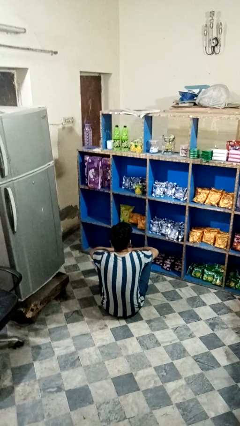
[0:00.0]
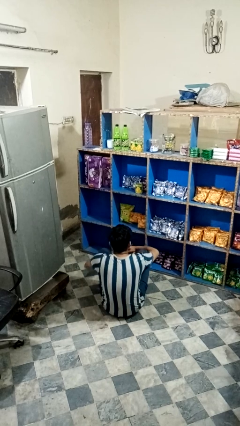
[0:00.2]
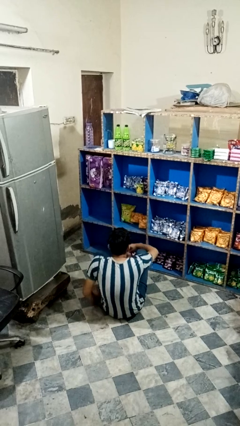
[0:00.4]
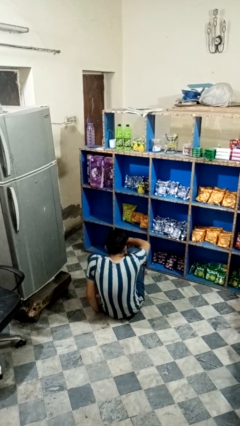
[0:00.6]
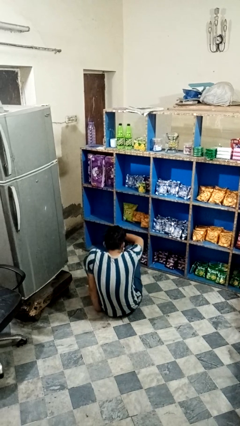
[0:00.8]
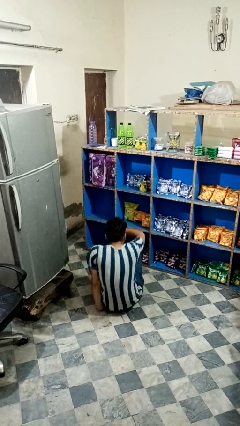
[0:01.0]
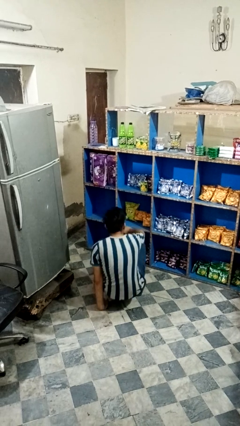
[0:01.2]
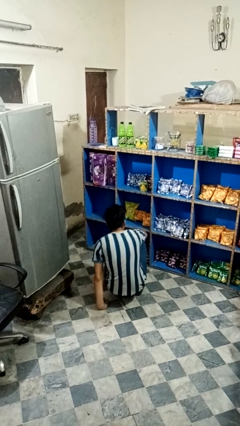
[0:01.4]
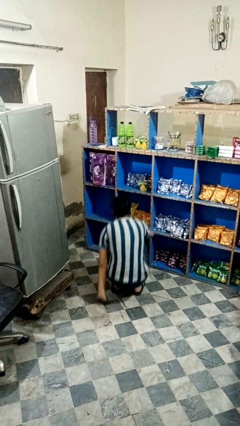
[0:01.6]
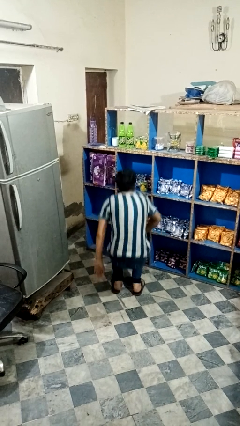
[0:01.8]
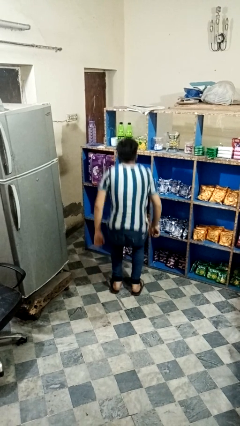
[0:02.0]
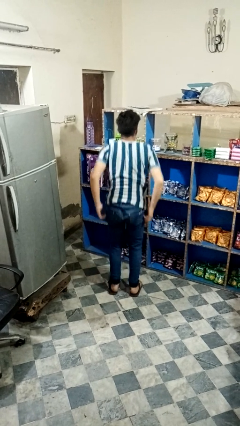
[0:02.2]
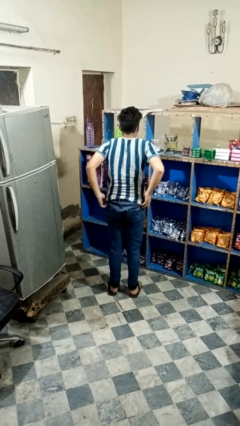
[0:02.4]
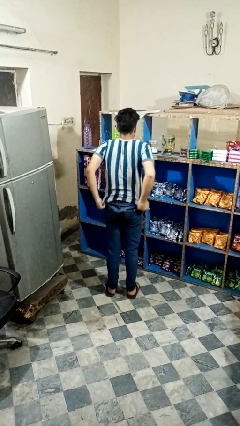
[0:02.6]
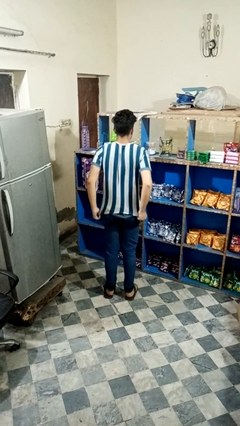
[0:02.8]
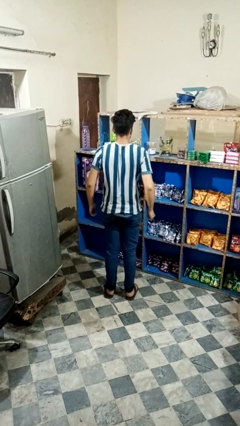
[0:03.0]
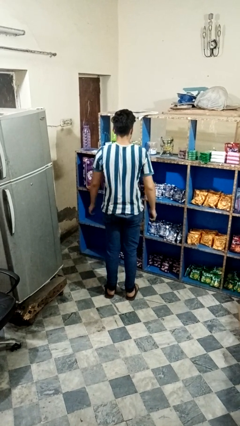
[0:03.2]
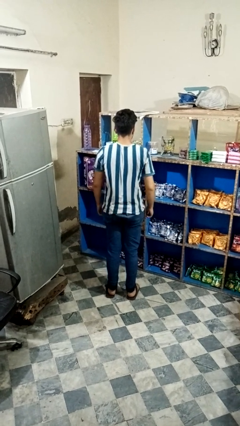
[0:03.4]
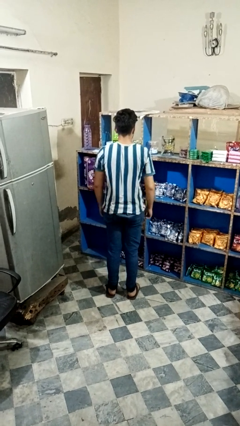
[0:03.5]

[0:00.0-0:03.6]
person stands up from floor

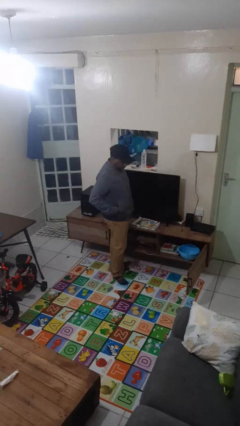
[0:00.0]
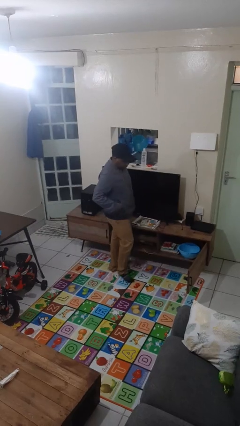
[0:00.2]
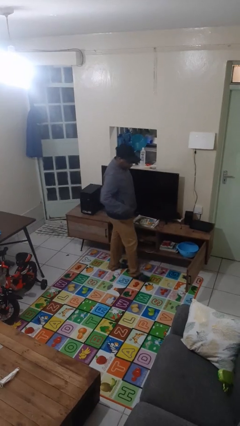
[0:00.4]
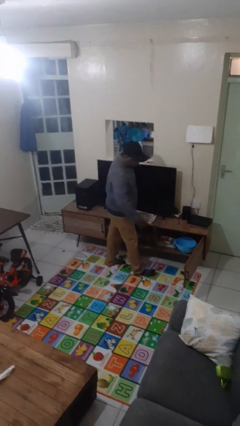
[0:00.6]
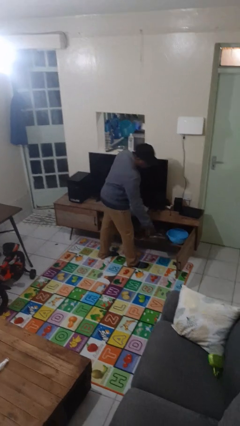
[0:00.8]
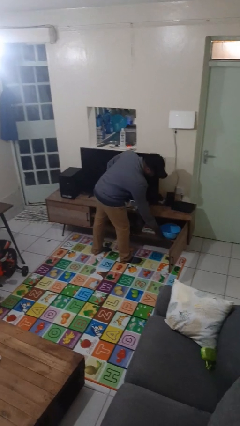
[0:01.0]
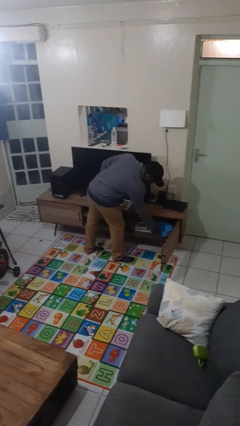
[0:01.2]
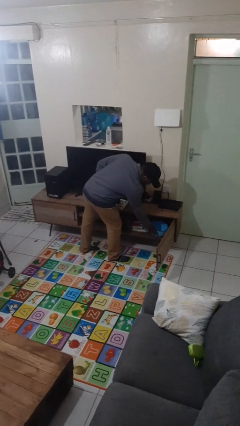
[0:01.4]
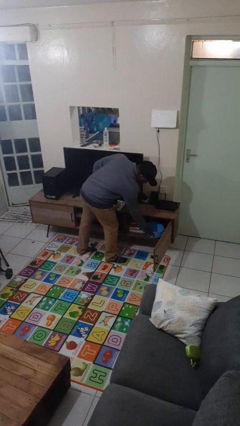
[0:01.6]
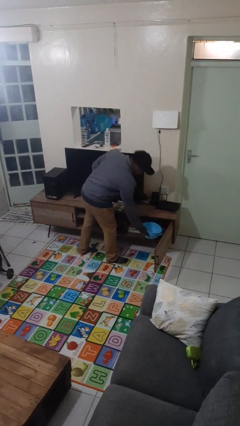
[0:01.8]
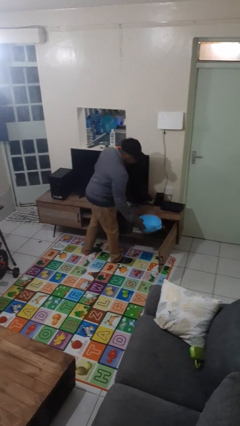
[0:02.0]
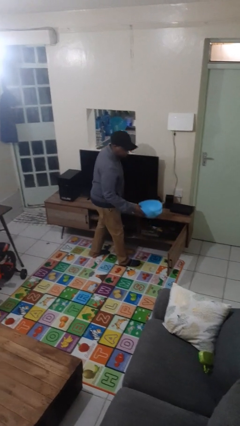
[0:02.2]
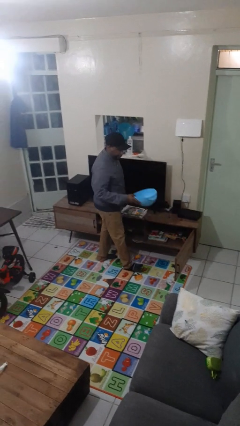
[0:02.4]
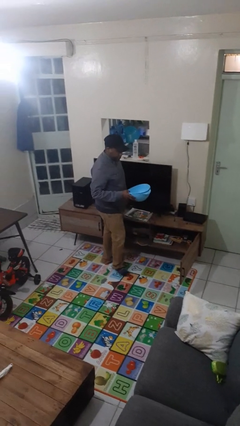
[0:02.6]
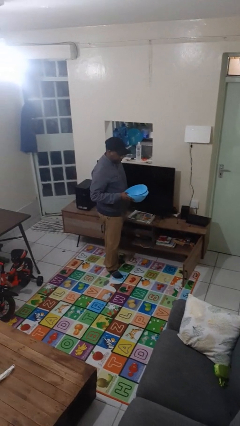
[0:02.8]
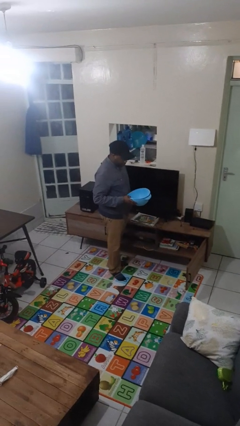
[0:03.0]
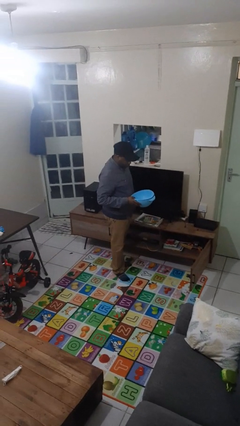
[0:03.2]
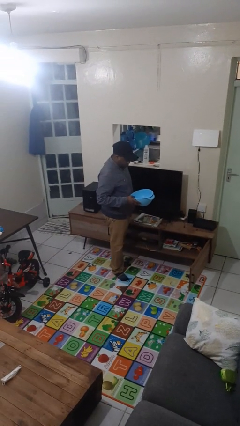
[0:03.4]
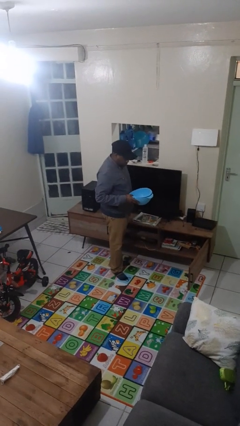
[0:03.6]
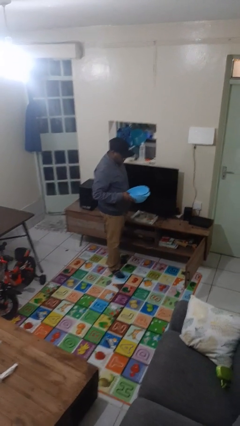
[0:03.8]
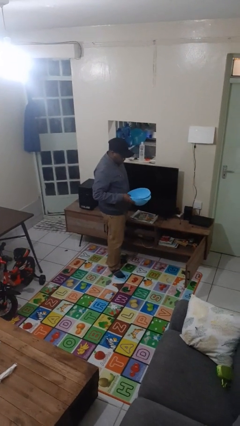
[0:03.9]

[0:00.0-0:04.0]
person picks up object from cabinet

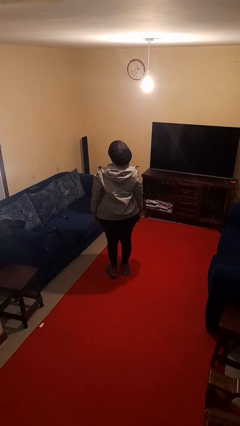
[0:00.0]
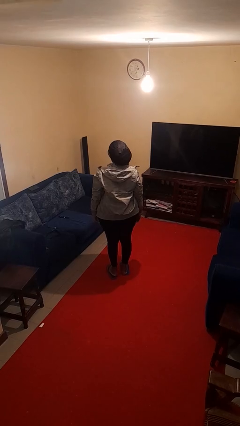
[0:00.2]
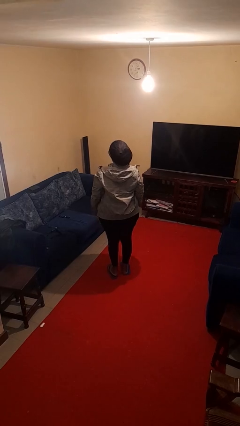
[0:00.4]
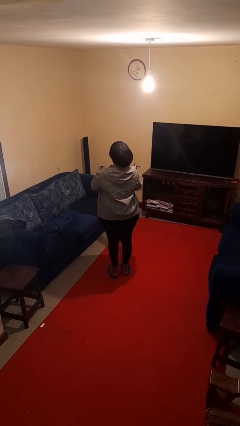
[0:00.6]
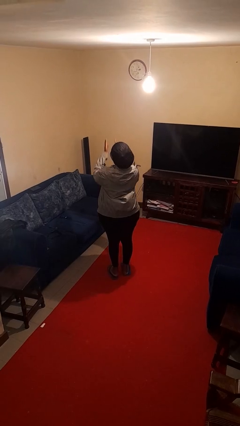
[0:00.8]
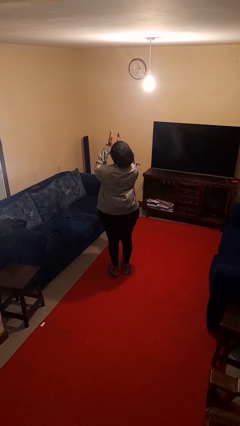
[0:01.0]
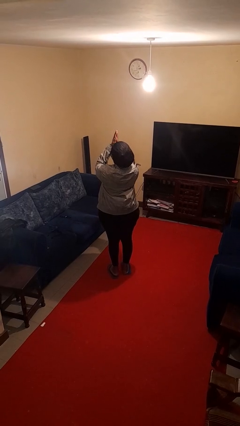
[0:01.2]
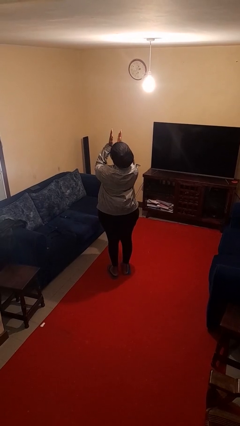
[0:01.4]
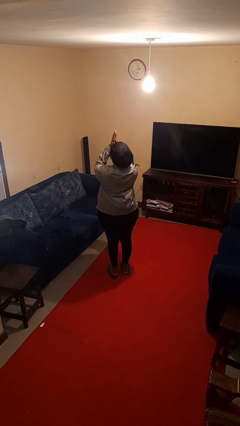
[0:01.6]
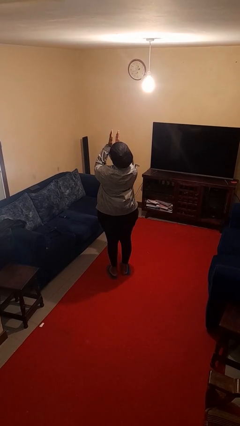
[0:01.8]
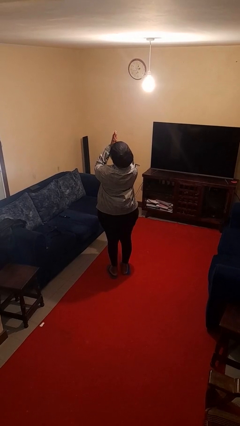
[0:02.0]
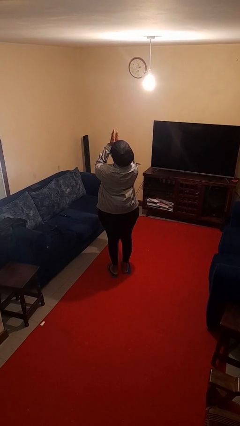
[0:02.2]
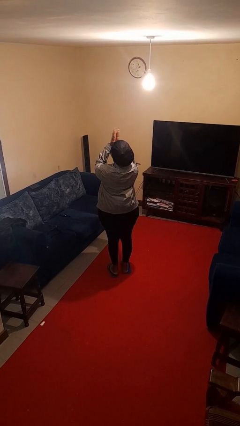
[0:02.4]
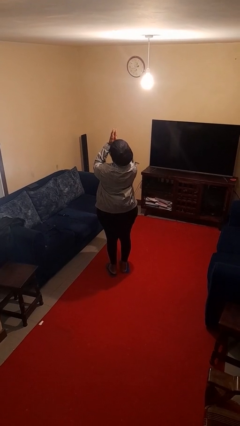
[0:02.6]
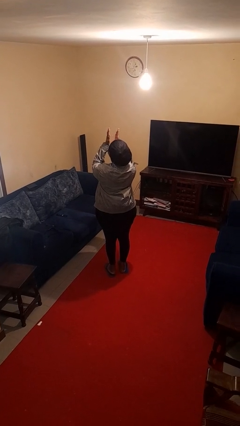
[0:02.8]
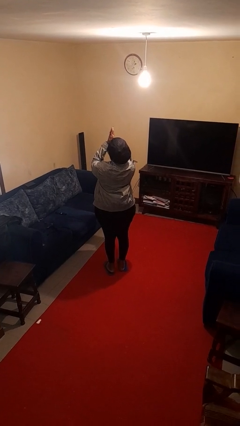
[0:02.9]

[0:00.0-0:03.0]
person claps hands

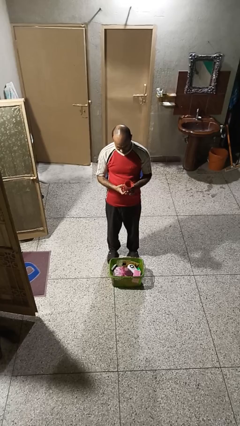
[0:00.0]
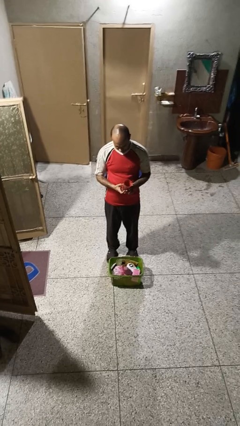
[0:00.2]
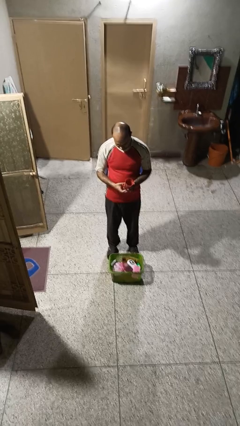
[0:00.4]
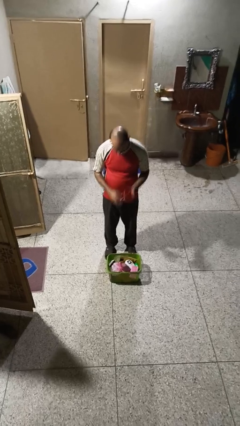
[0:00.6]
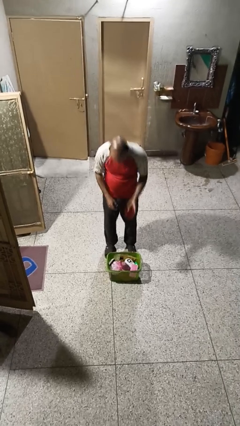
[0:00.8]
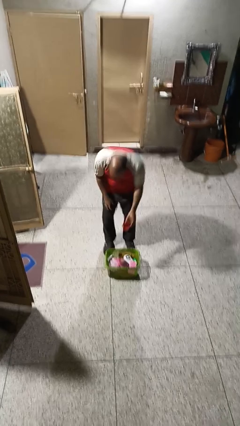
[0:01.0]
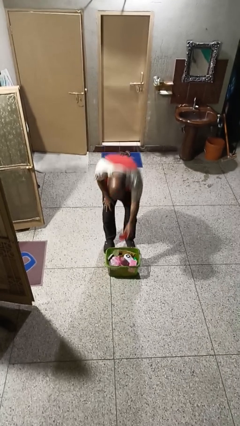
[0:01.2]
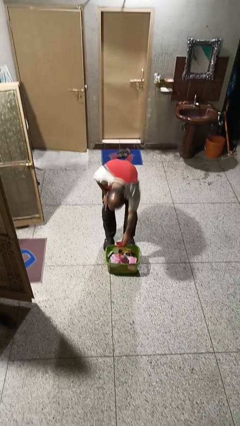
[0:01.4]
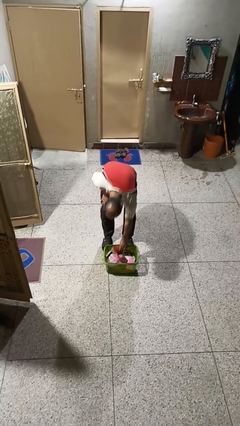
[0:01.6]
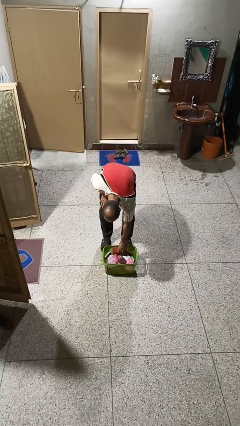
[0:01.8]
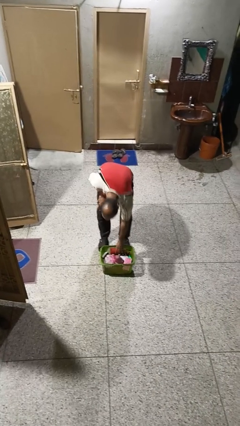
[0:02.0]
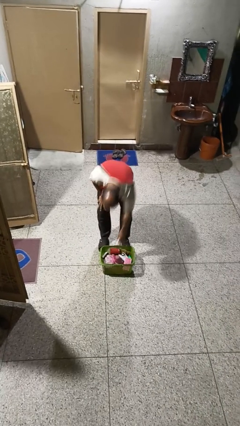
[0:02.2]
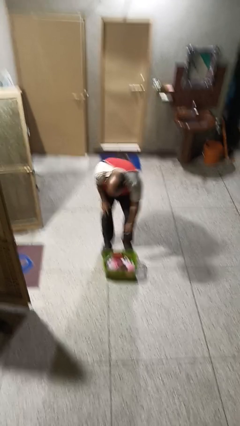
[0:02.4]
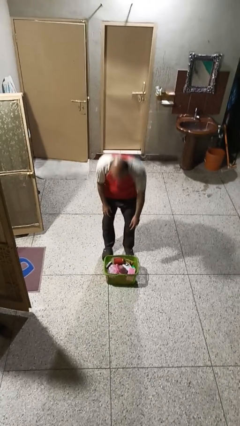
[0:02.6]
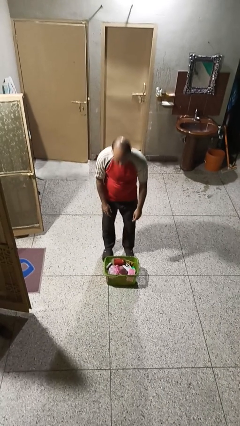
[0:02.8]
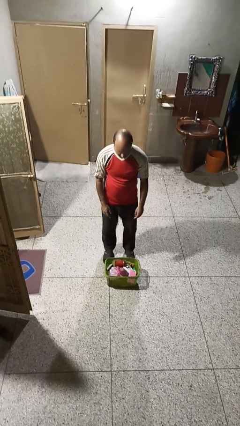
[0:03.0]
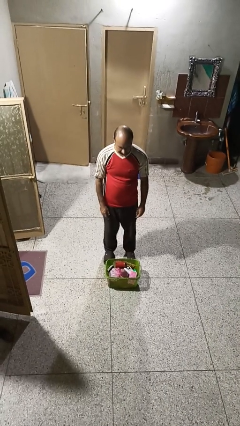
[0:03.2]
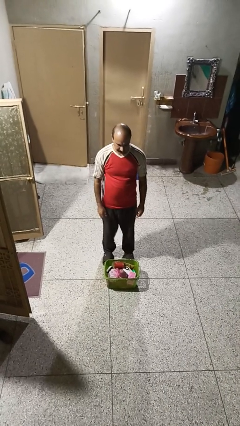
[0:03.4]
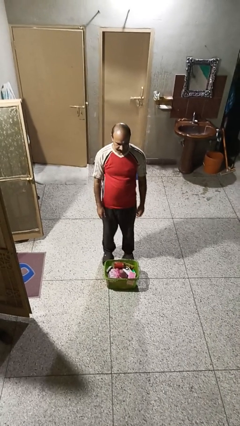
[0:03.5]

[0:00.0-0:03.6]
person puts object into basket

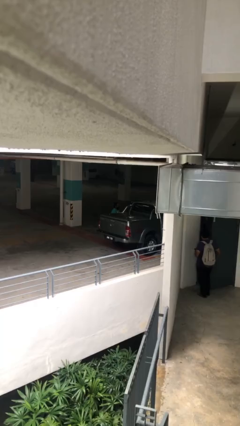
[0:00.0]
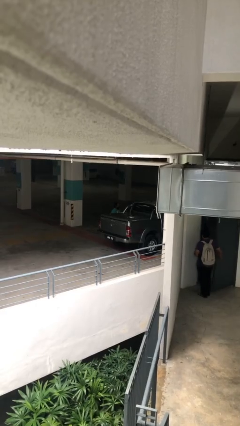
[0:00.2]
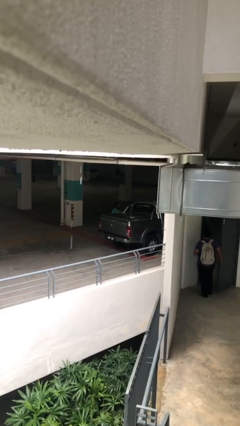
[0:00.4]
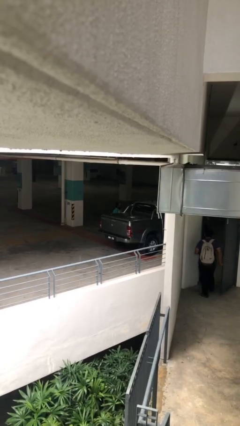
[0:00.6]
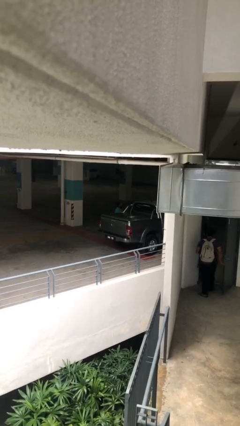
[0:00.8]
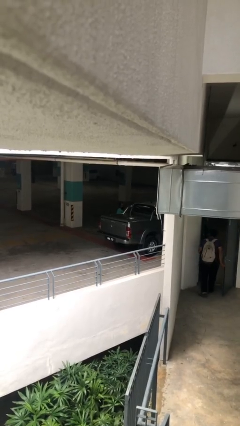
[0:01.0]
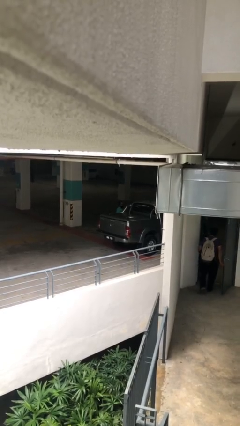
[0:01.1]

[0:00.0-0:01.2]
person closes car door

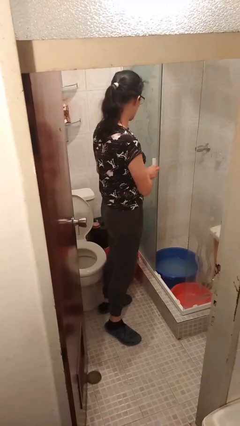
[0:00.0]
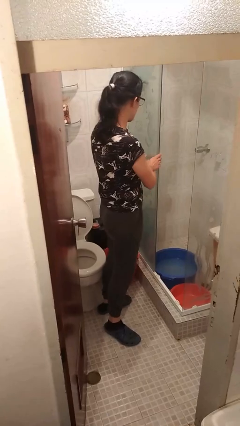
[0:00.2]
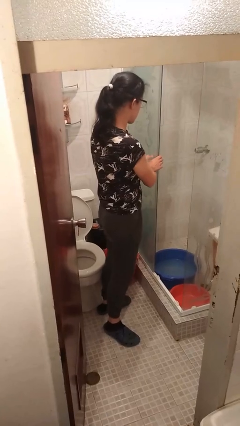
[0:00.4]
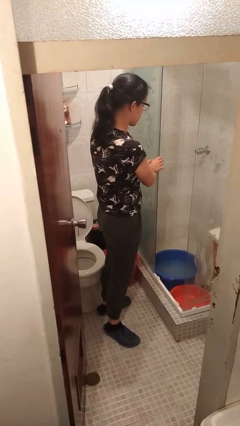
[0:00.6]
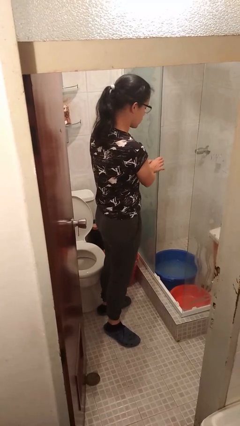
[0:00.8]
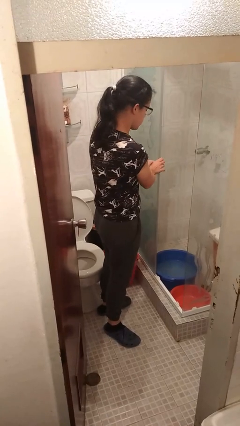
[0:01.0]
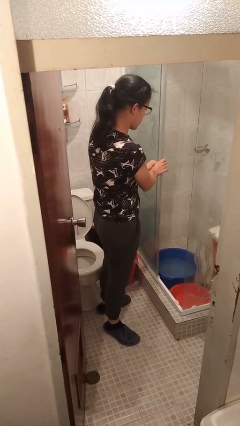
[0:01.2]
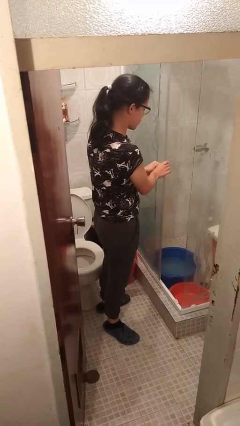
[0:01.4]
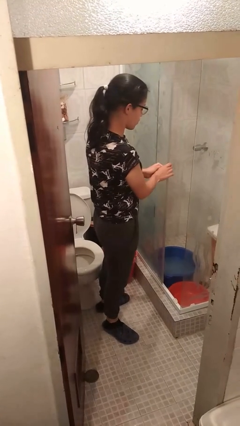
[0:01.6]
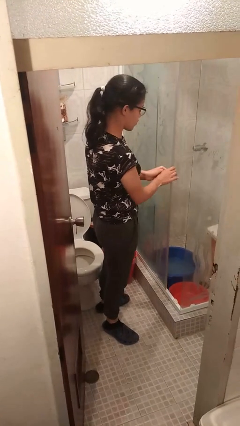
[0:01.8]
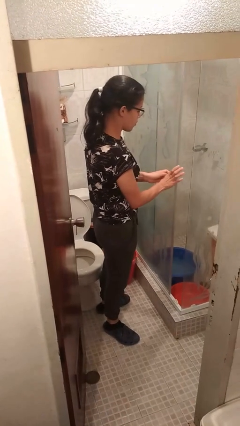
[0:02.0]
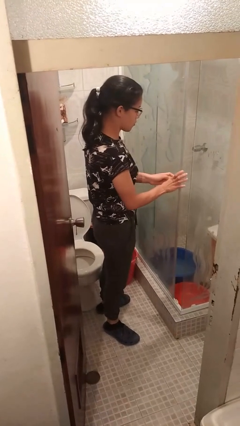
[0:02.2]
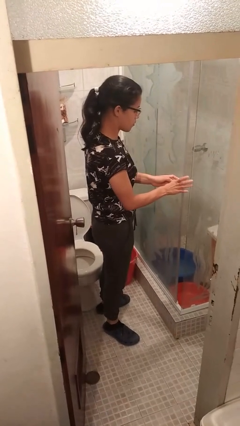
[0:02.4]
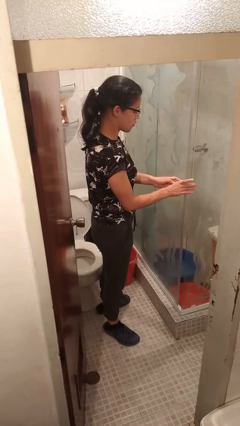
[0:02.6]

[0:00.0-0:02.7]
person closes sliding door
